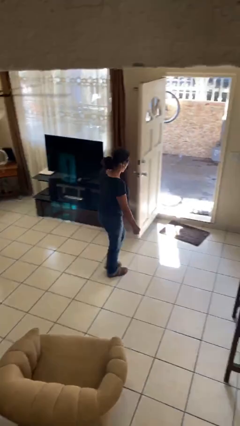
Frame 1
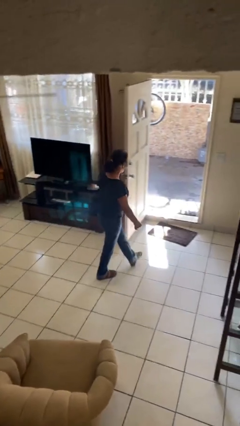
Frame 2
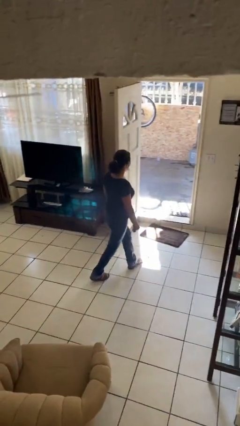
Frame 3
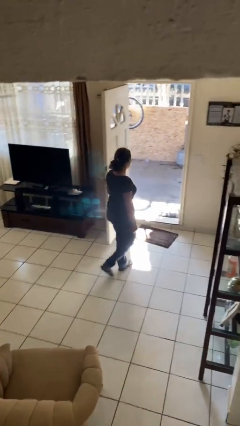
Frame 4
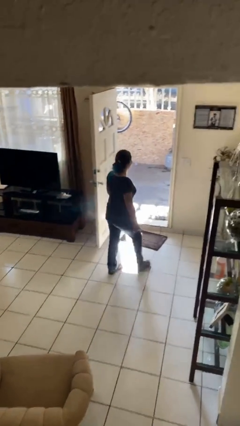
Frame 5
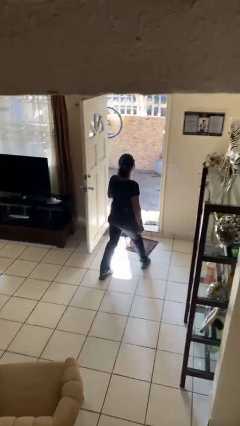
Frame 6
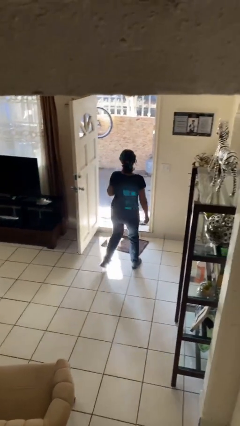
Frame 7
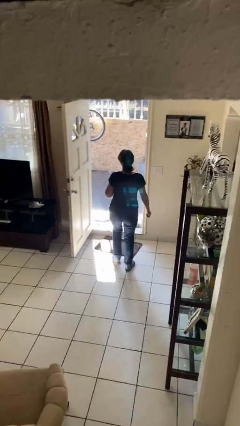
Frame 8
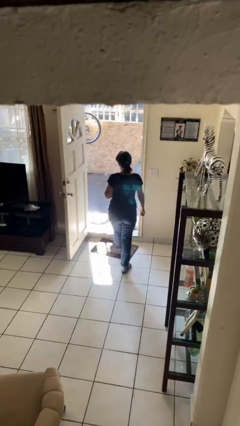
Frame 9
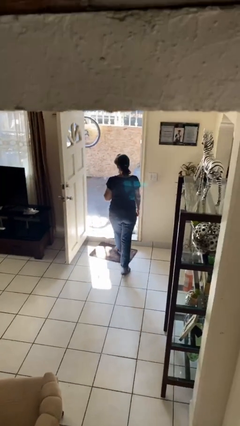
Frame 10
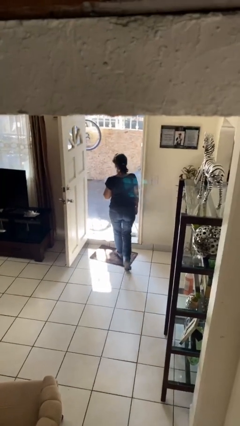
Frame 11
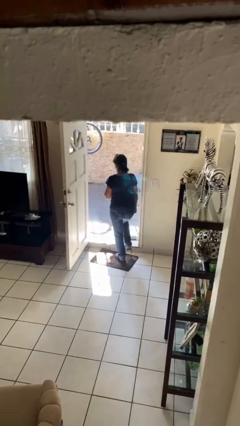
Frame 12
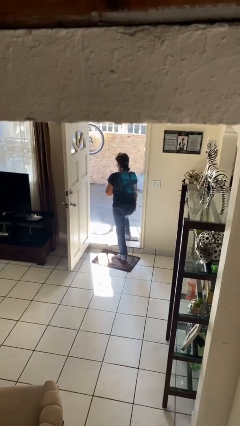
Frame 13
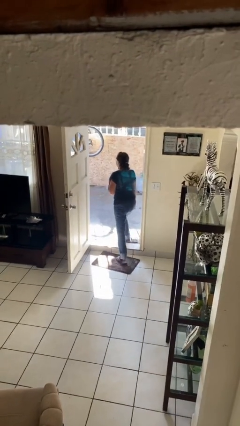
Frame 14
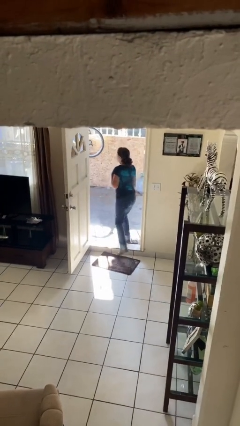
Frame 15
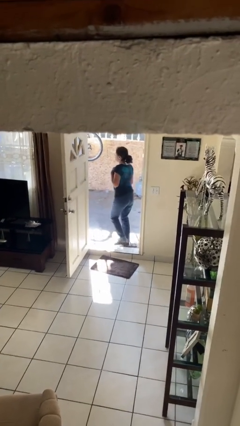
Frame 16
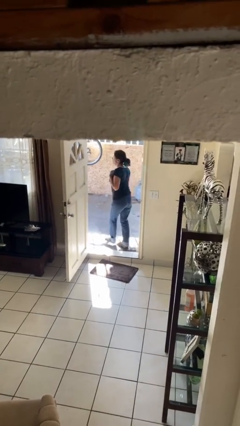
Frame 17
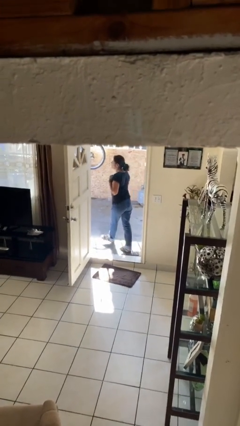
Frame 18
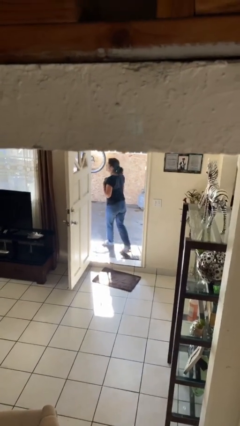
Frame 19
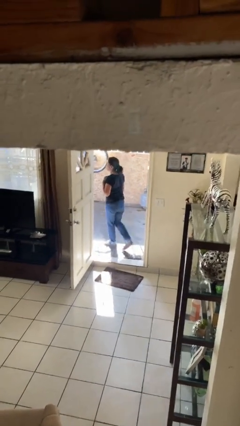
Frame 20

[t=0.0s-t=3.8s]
person exits scene through structure

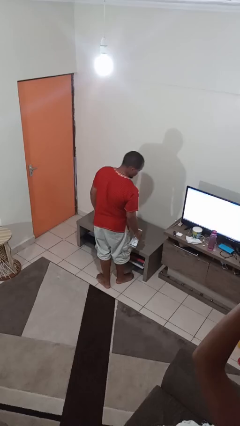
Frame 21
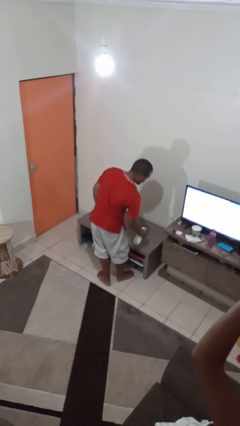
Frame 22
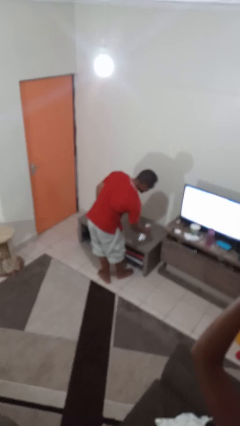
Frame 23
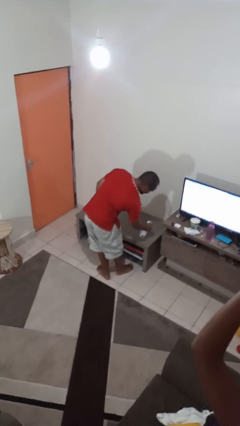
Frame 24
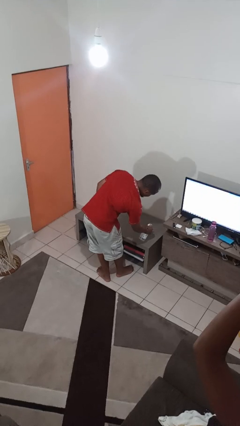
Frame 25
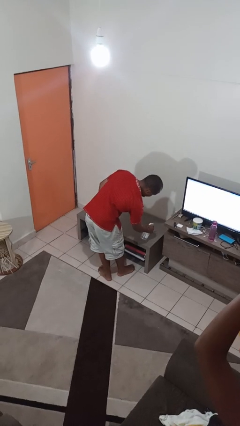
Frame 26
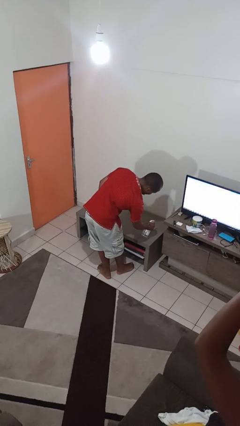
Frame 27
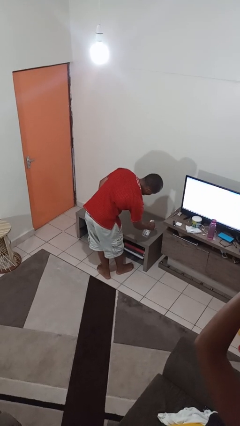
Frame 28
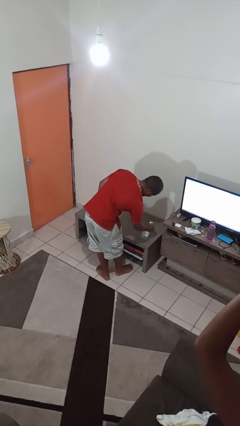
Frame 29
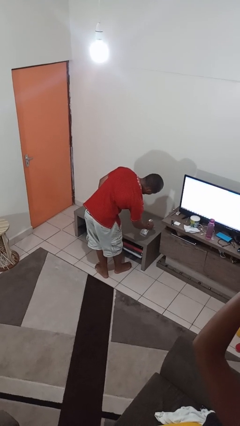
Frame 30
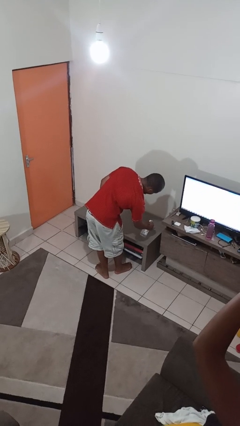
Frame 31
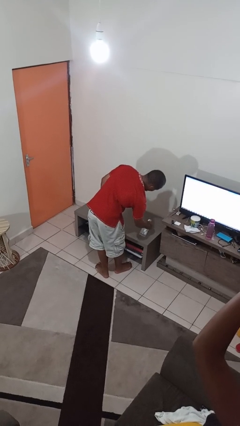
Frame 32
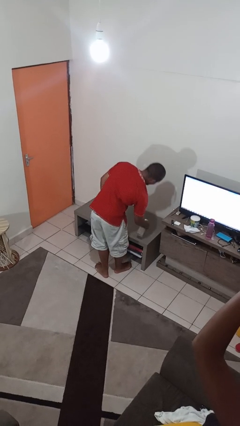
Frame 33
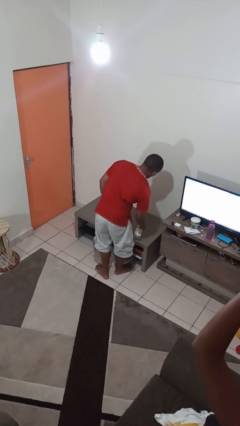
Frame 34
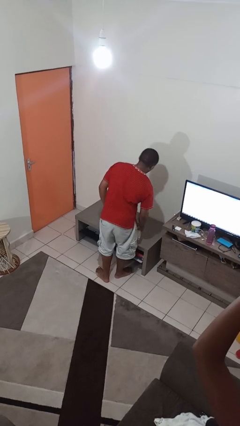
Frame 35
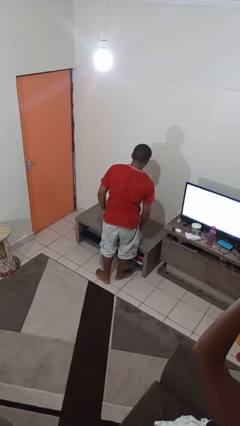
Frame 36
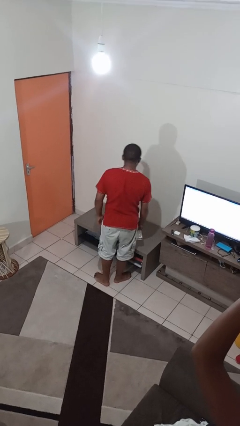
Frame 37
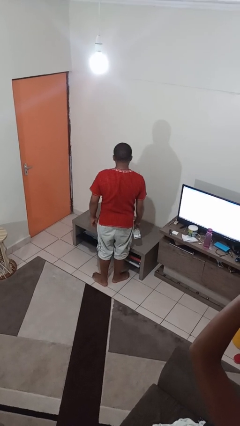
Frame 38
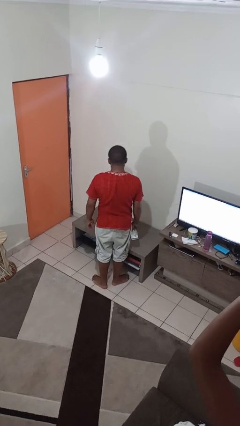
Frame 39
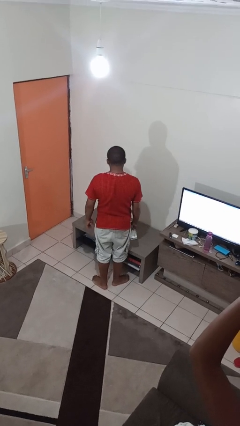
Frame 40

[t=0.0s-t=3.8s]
person sprays from bottle

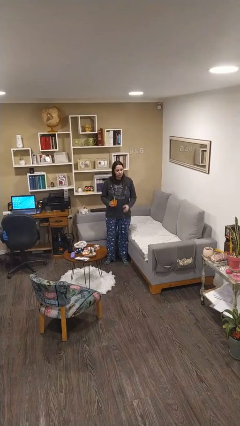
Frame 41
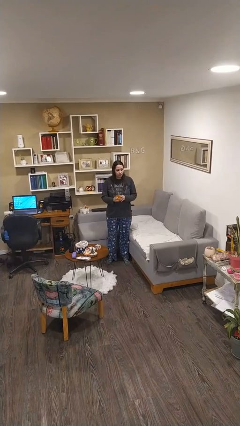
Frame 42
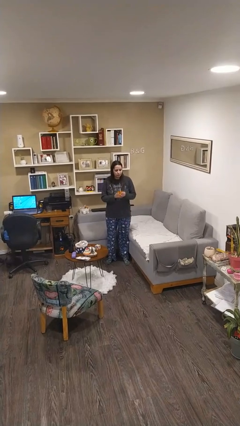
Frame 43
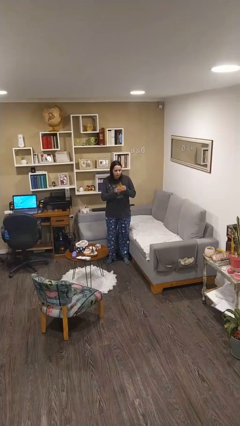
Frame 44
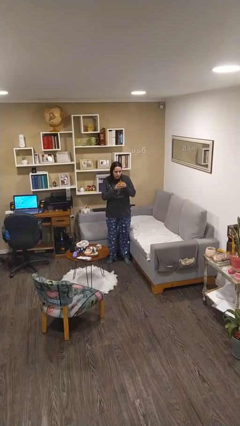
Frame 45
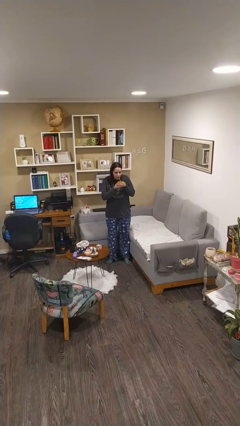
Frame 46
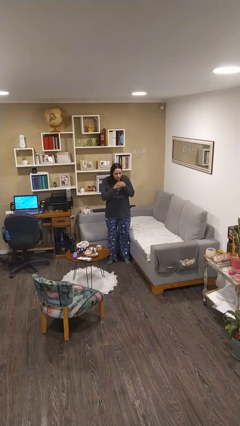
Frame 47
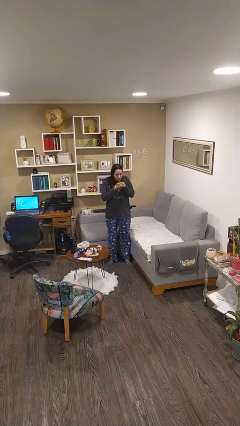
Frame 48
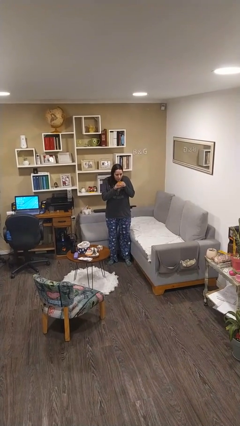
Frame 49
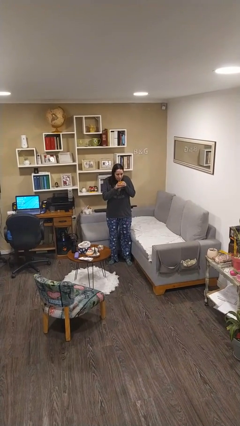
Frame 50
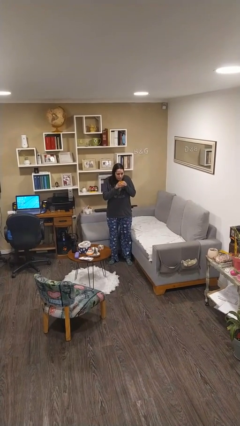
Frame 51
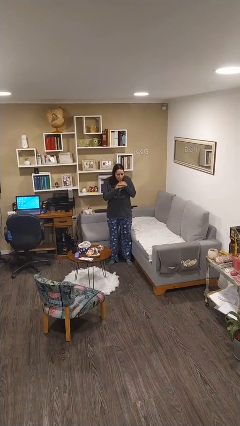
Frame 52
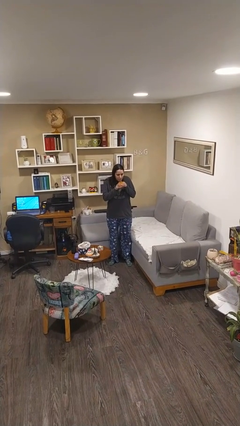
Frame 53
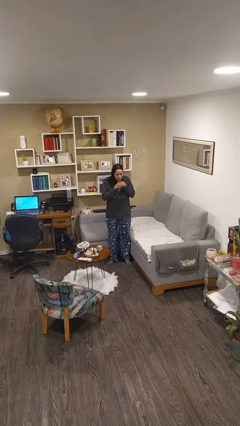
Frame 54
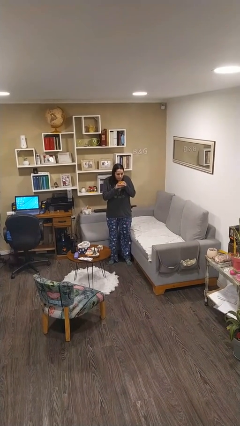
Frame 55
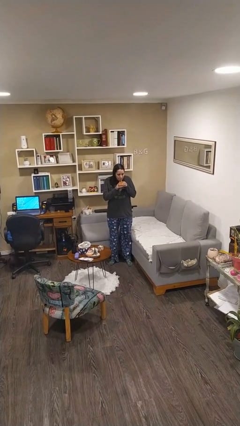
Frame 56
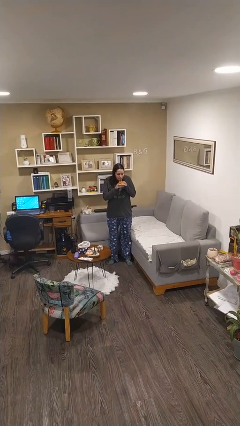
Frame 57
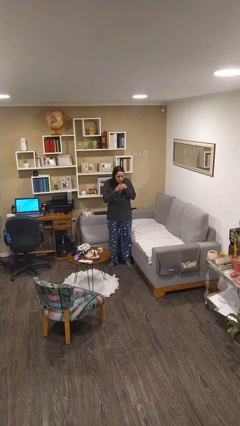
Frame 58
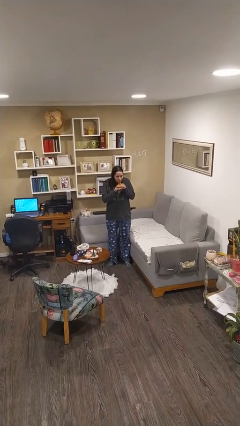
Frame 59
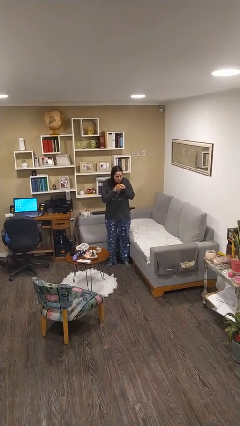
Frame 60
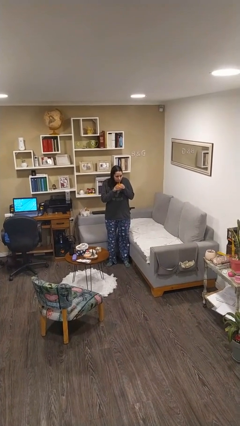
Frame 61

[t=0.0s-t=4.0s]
person drinks from straw

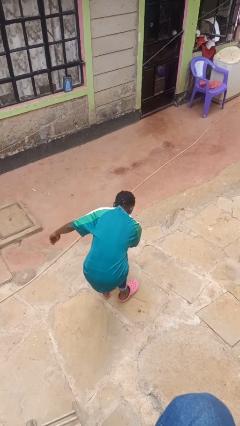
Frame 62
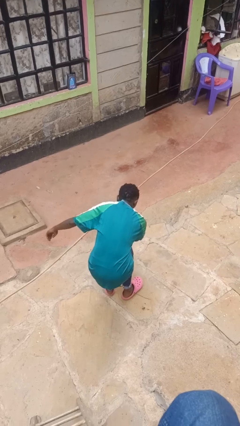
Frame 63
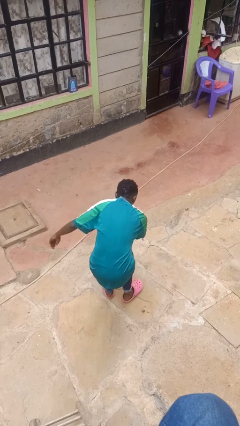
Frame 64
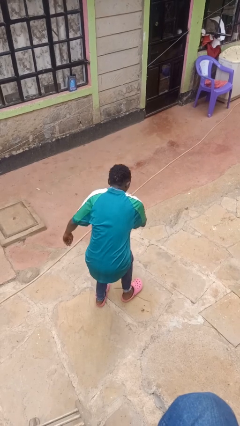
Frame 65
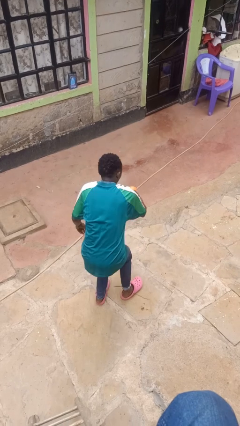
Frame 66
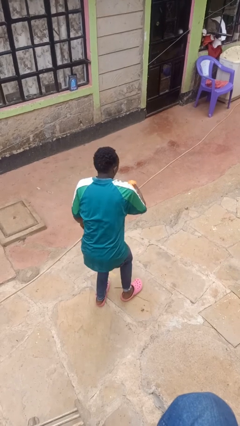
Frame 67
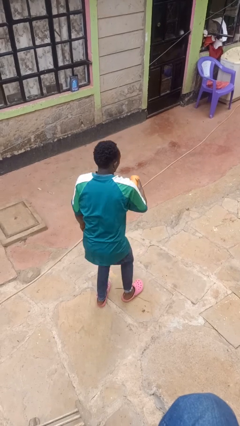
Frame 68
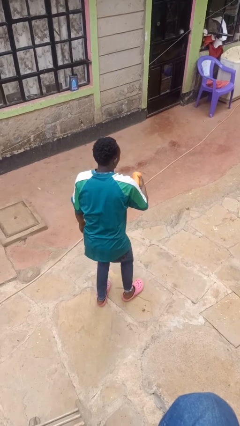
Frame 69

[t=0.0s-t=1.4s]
person catches dropped object

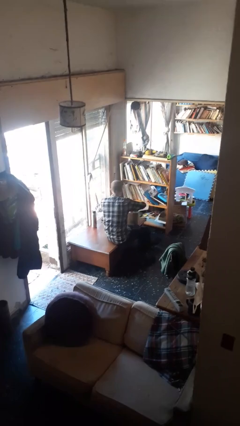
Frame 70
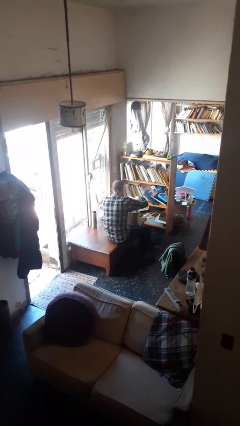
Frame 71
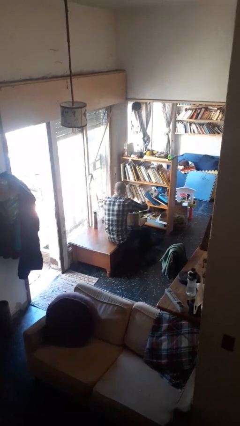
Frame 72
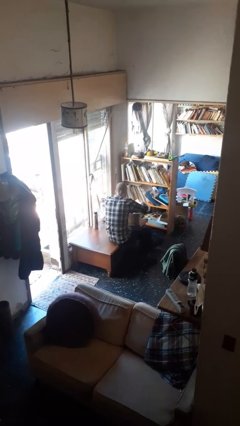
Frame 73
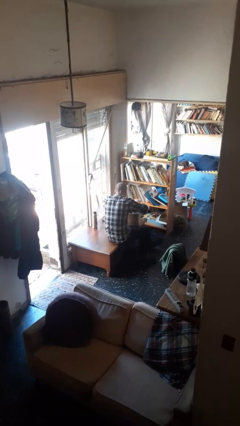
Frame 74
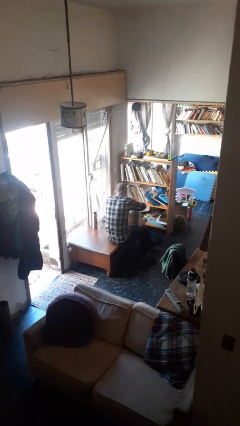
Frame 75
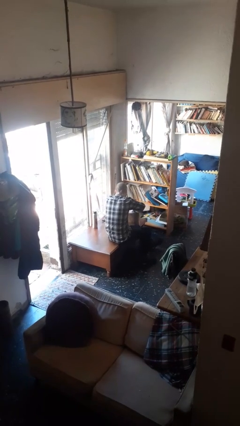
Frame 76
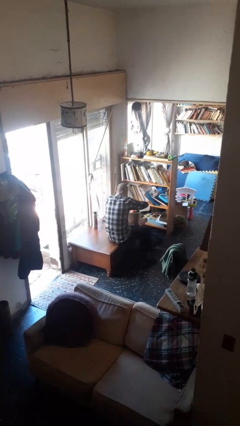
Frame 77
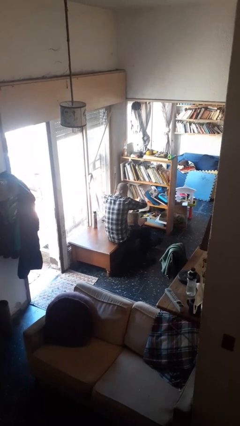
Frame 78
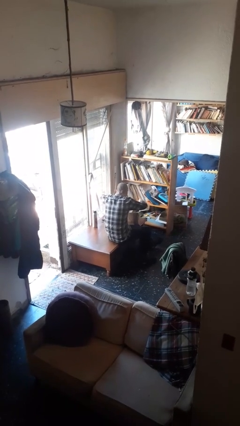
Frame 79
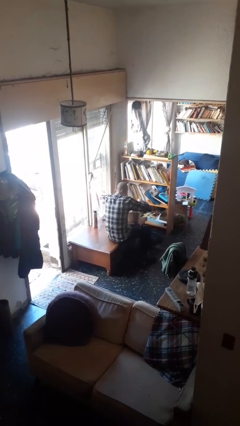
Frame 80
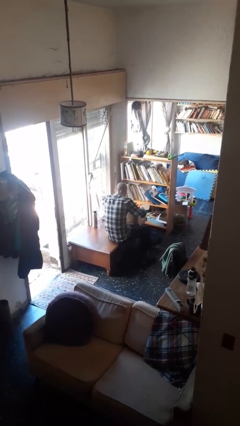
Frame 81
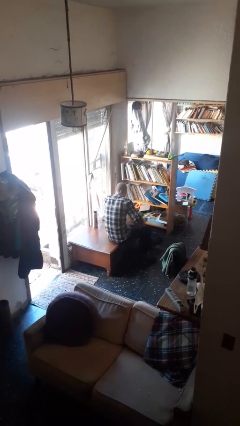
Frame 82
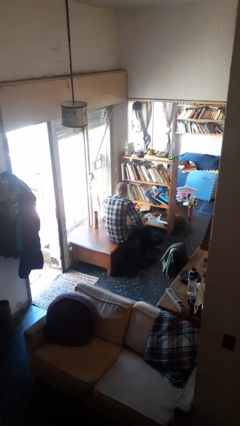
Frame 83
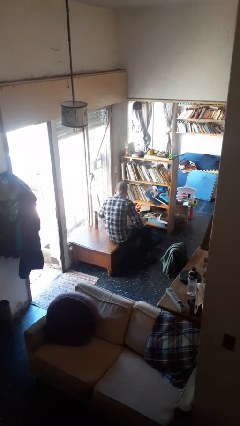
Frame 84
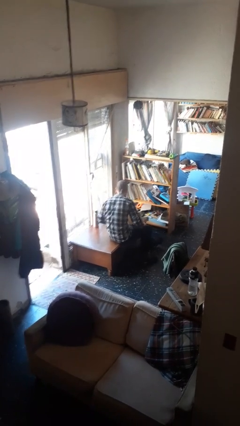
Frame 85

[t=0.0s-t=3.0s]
person searches in box

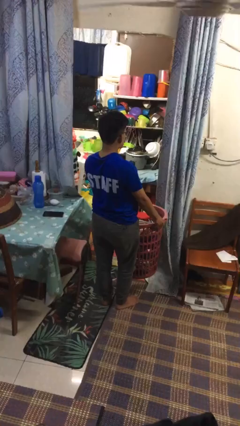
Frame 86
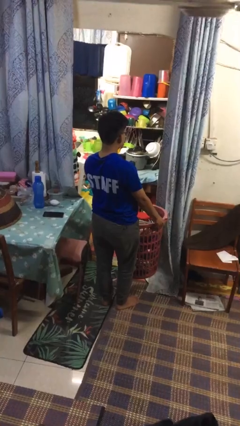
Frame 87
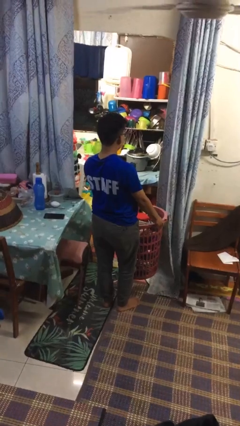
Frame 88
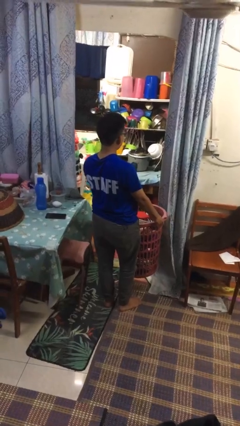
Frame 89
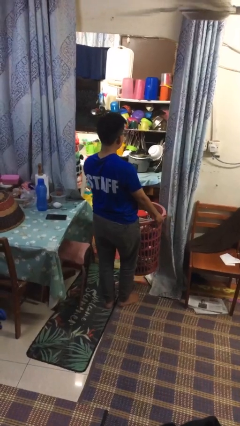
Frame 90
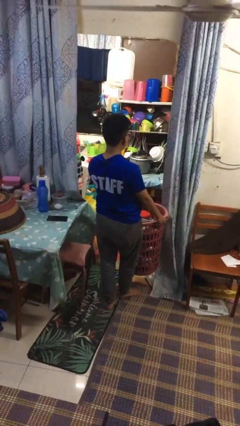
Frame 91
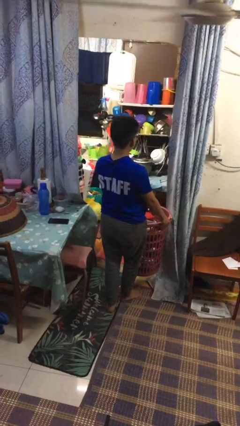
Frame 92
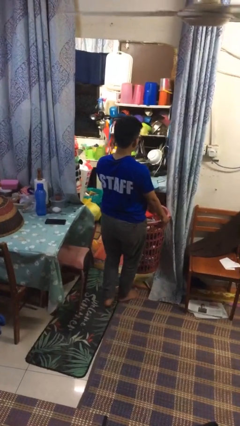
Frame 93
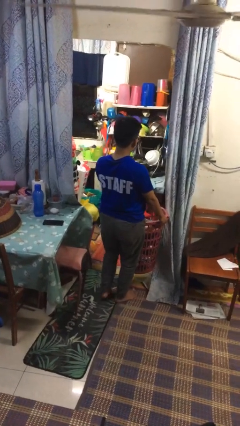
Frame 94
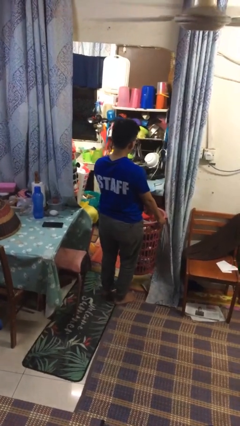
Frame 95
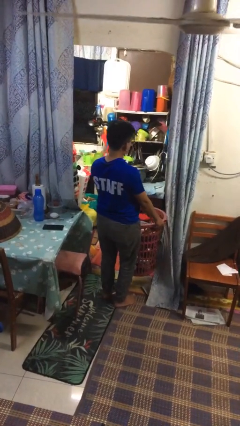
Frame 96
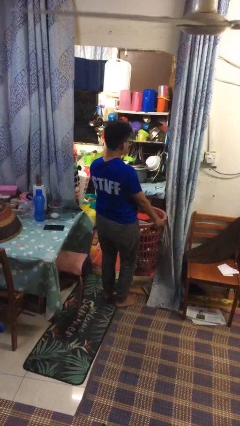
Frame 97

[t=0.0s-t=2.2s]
person carries laundry basket
